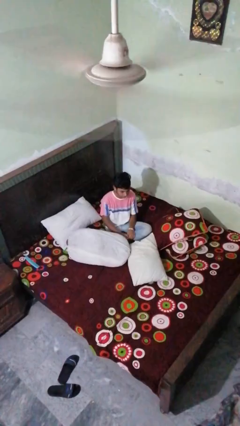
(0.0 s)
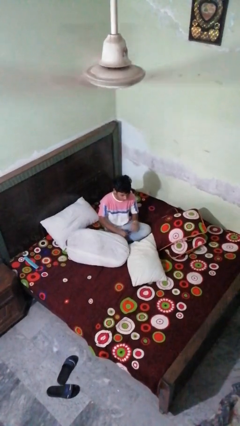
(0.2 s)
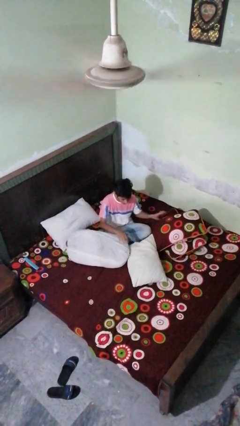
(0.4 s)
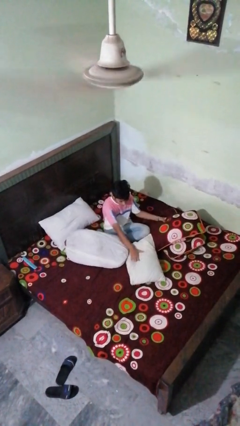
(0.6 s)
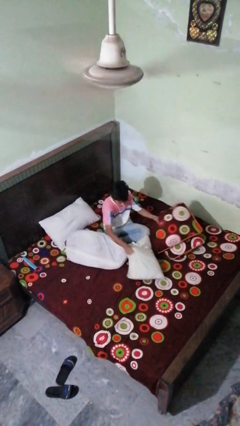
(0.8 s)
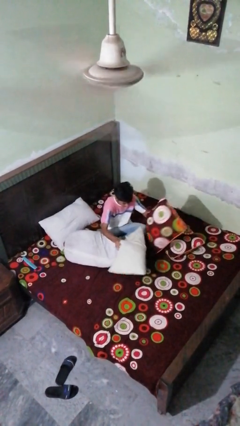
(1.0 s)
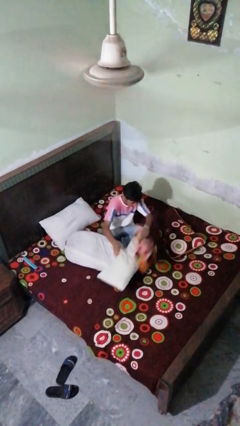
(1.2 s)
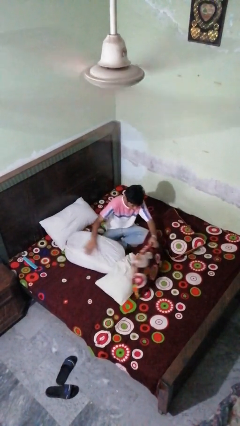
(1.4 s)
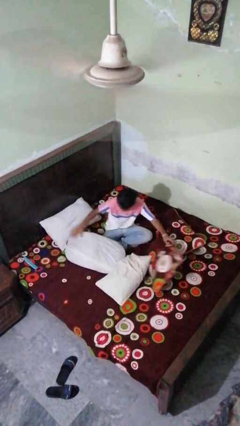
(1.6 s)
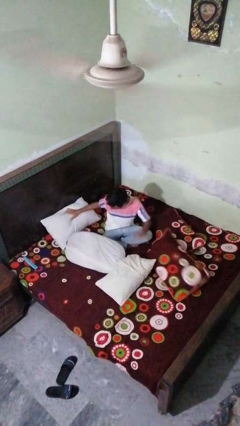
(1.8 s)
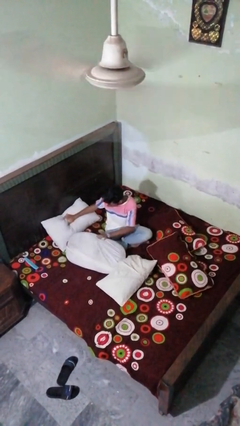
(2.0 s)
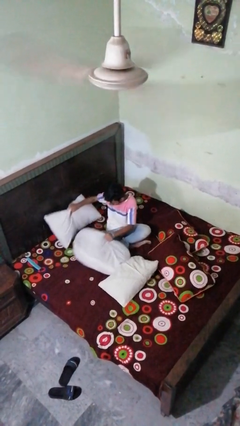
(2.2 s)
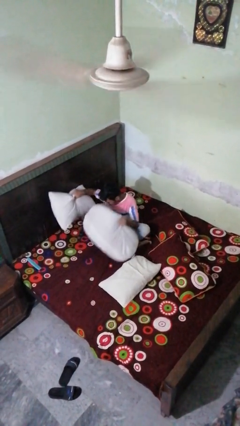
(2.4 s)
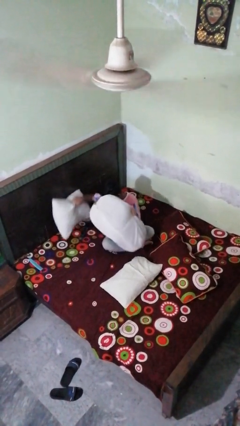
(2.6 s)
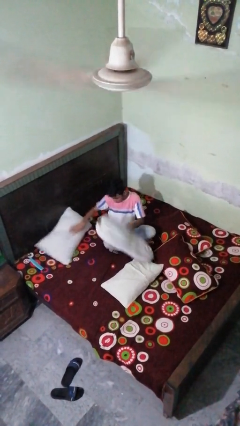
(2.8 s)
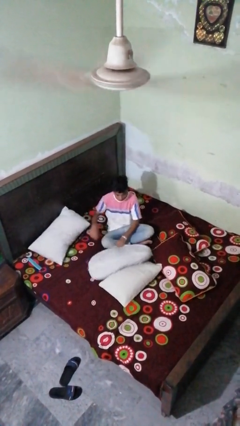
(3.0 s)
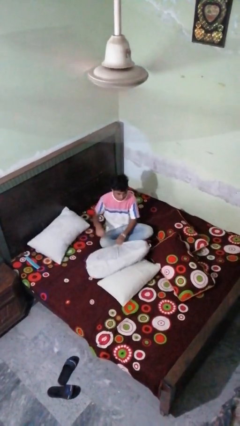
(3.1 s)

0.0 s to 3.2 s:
person searches under bed

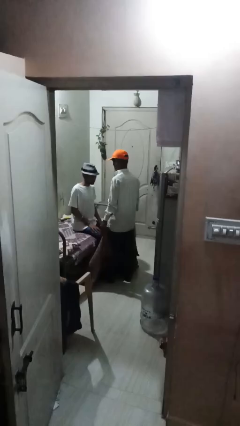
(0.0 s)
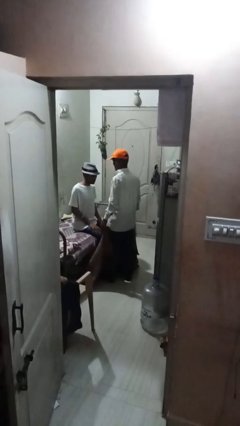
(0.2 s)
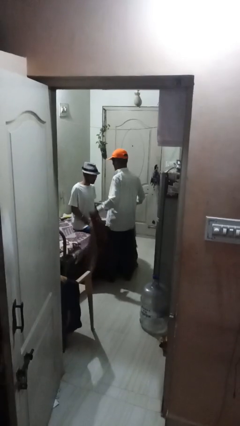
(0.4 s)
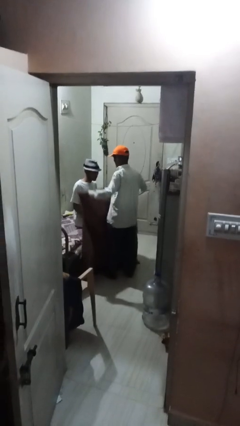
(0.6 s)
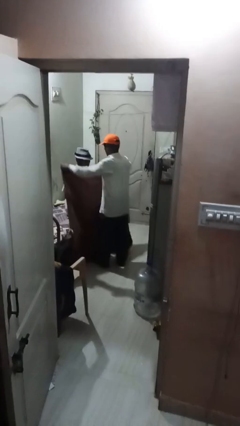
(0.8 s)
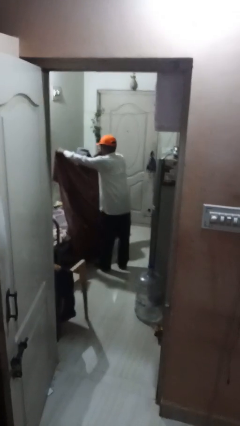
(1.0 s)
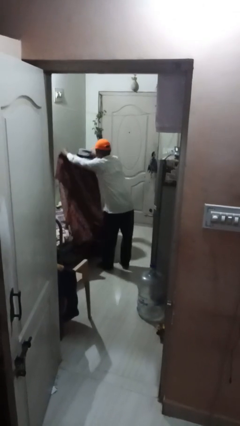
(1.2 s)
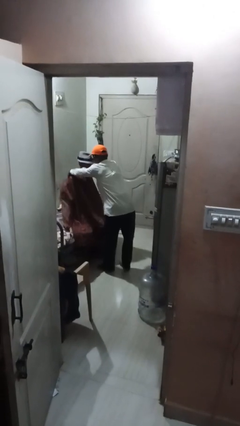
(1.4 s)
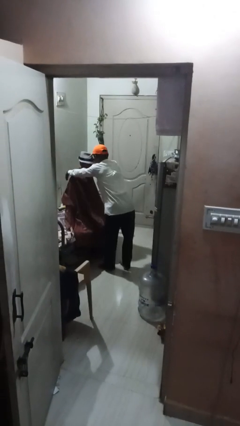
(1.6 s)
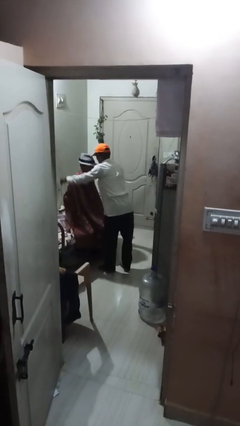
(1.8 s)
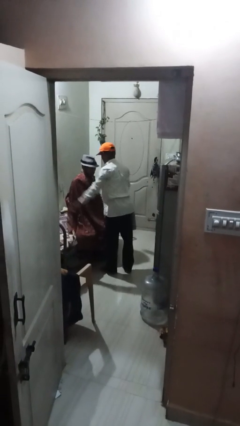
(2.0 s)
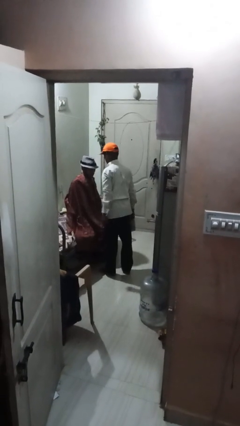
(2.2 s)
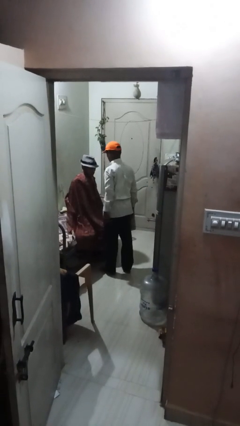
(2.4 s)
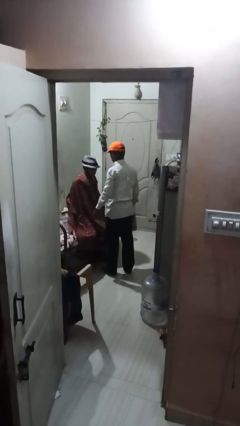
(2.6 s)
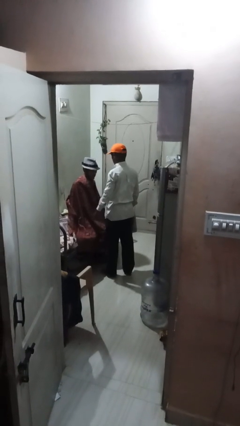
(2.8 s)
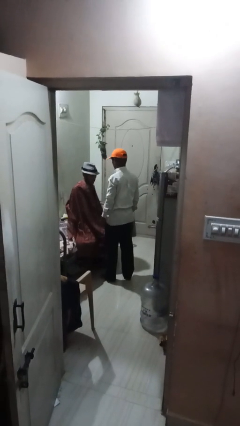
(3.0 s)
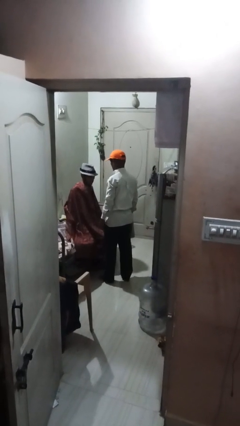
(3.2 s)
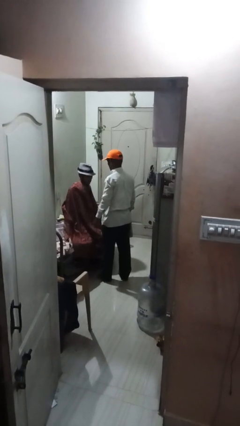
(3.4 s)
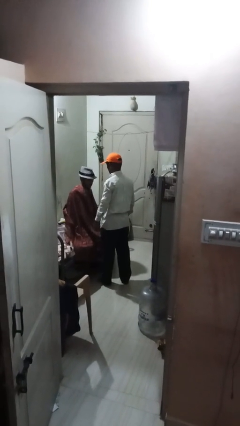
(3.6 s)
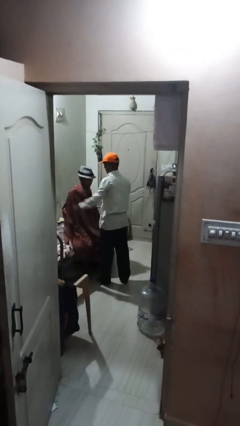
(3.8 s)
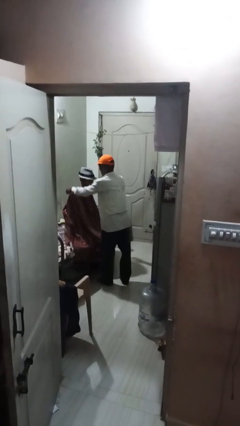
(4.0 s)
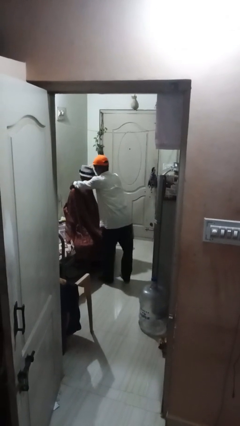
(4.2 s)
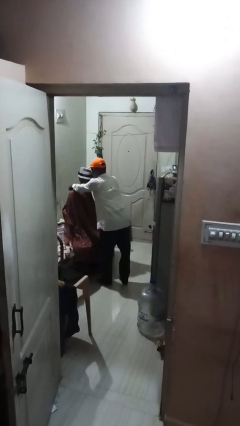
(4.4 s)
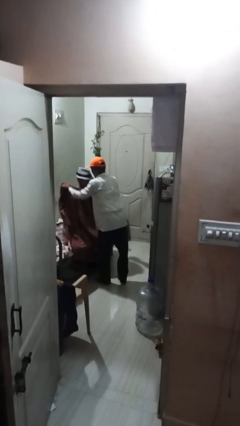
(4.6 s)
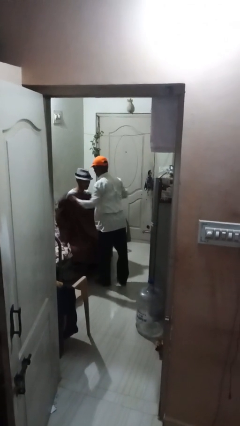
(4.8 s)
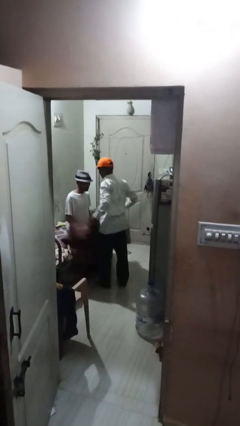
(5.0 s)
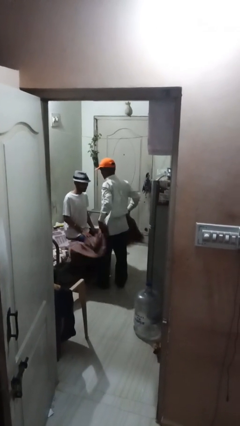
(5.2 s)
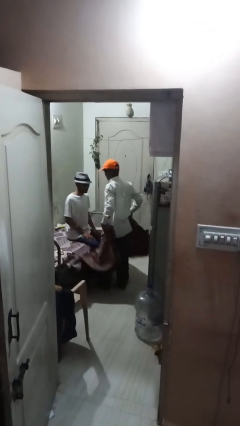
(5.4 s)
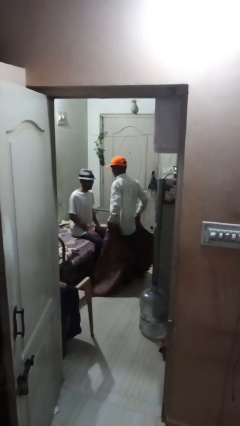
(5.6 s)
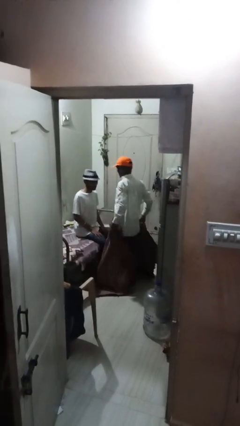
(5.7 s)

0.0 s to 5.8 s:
person covers friend with blanket

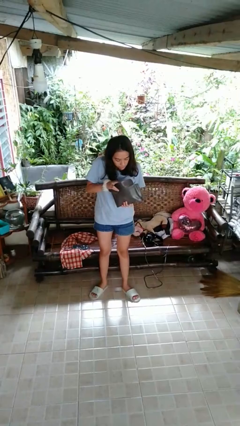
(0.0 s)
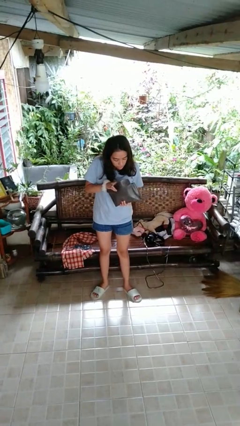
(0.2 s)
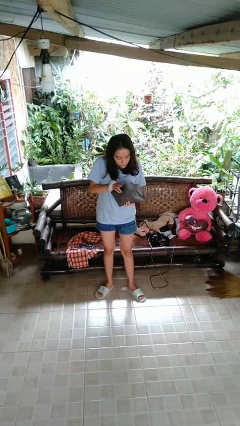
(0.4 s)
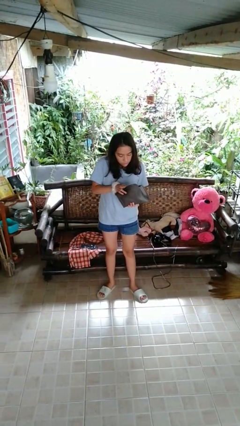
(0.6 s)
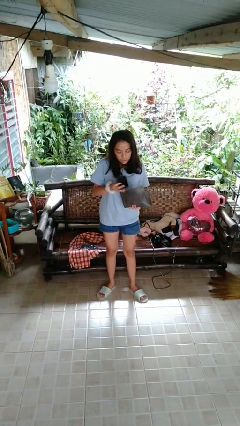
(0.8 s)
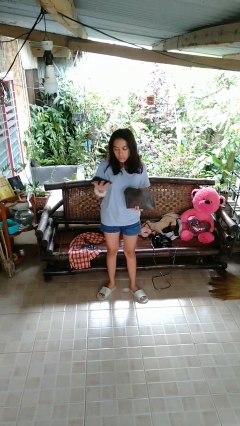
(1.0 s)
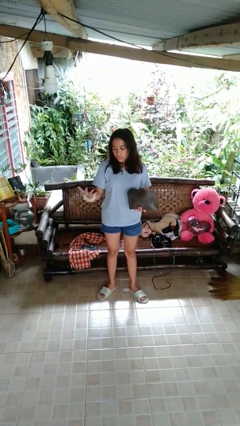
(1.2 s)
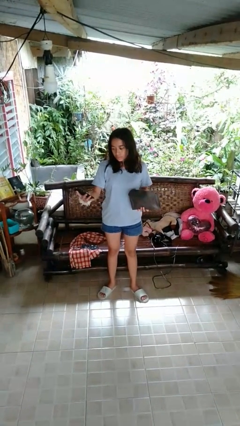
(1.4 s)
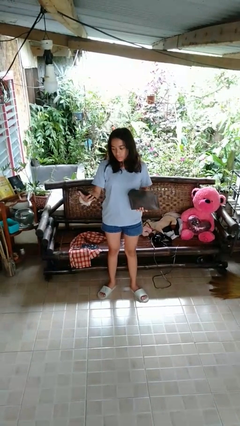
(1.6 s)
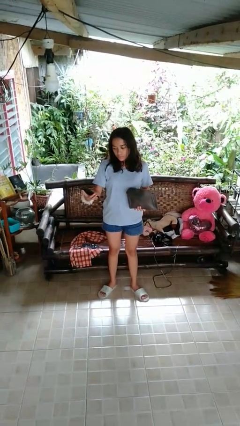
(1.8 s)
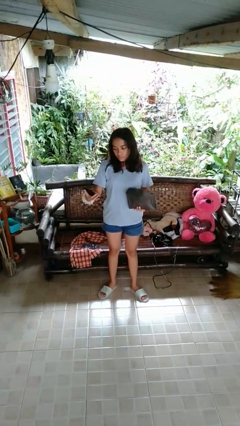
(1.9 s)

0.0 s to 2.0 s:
person takes object from purse

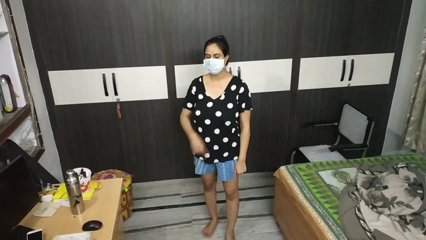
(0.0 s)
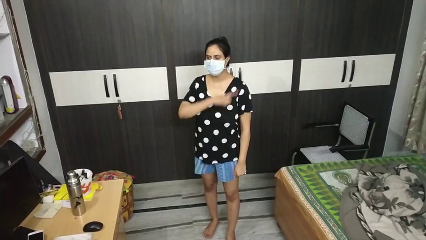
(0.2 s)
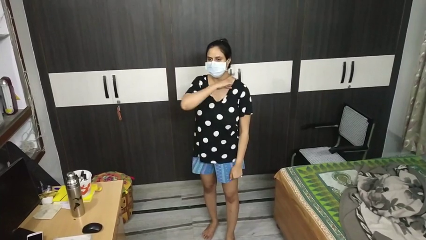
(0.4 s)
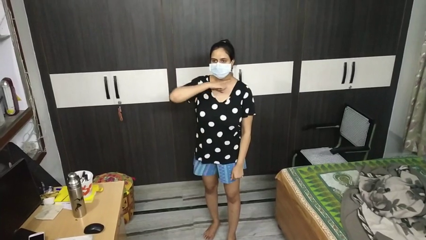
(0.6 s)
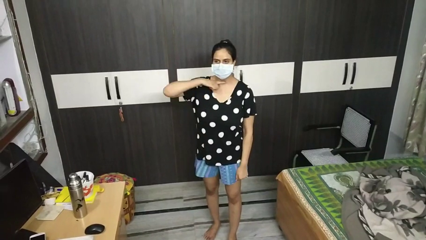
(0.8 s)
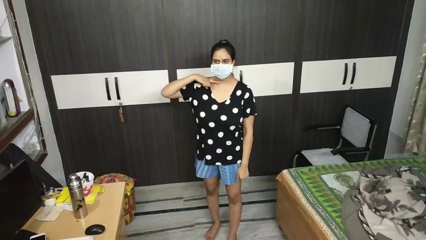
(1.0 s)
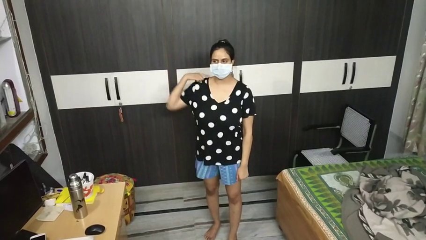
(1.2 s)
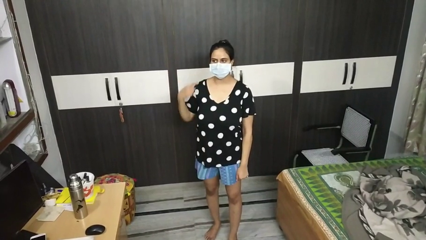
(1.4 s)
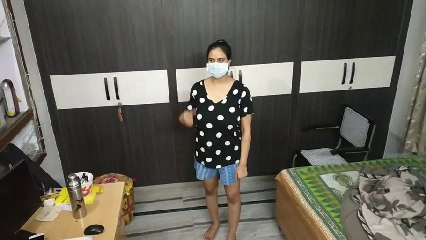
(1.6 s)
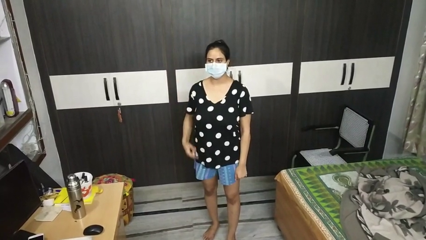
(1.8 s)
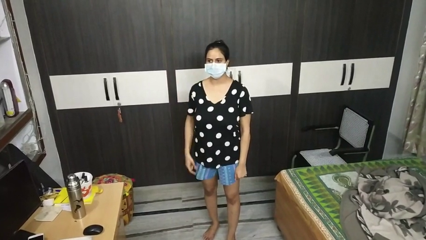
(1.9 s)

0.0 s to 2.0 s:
person gestures cut

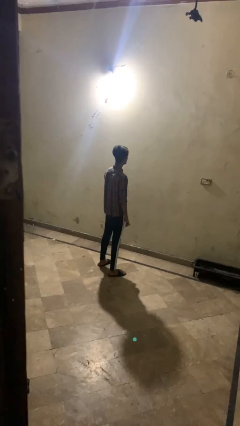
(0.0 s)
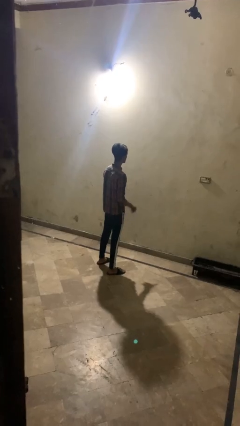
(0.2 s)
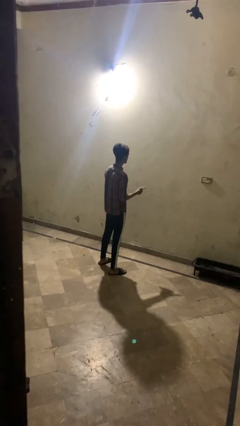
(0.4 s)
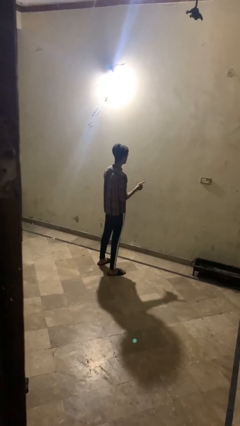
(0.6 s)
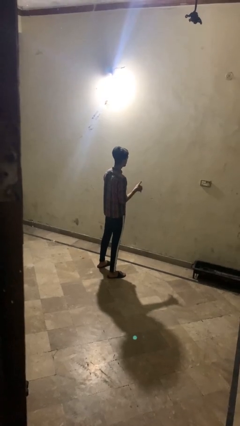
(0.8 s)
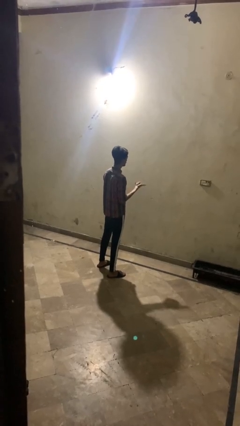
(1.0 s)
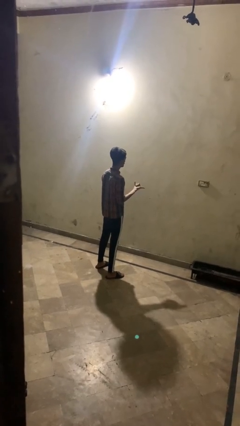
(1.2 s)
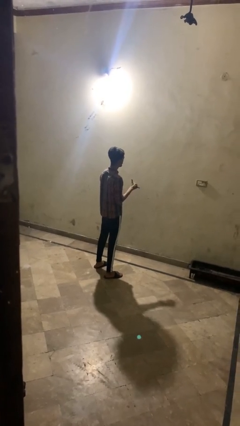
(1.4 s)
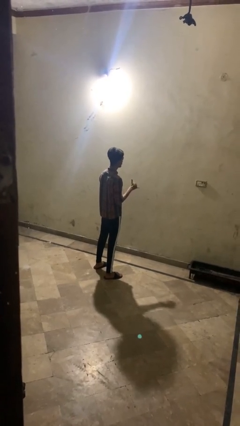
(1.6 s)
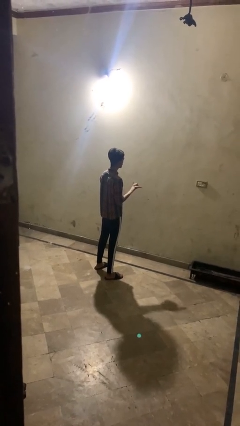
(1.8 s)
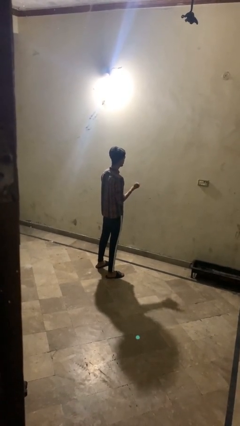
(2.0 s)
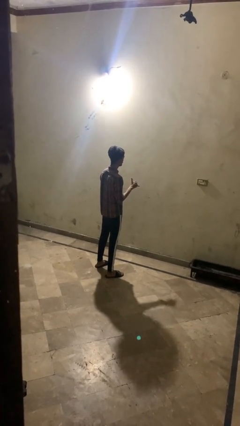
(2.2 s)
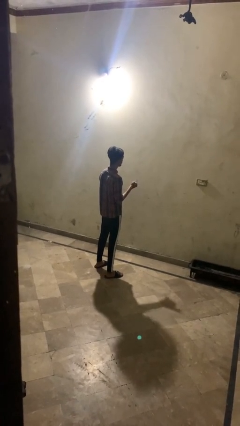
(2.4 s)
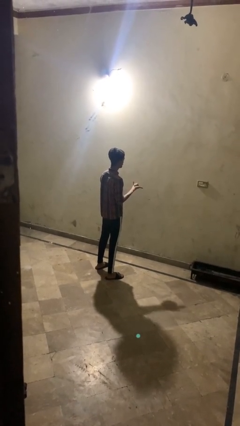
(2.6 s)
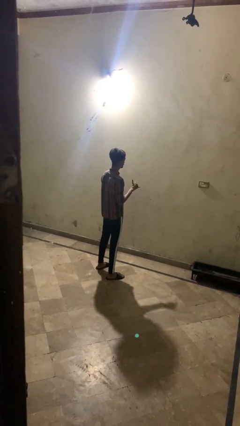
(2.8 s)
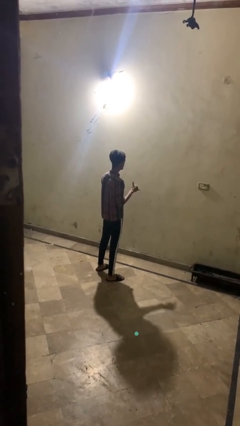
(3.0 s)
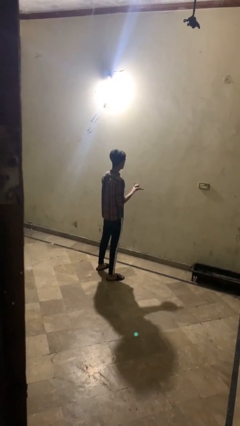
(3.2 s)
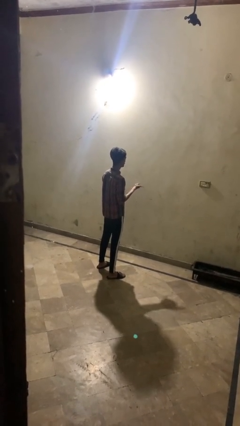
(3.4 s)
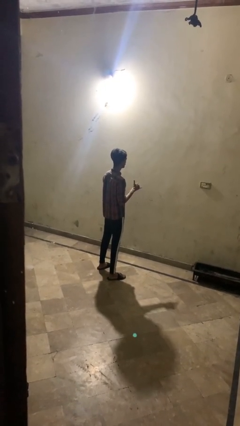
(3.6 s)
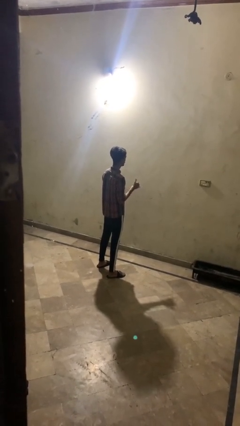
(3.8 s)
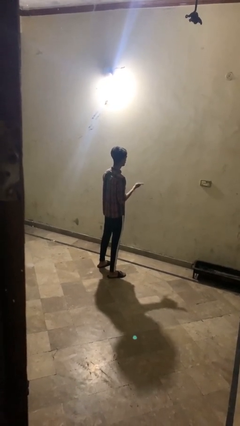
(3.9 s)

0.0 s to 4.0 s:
person gestures hang loose

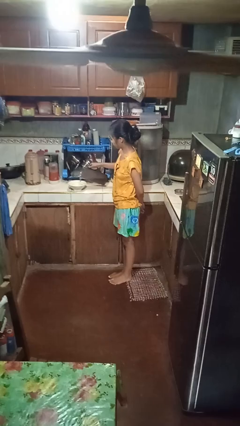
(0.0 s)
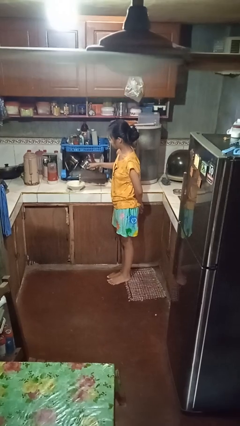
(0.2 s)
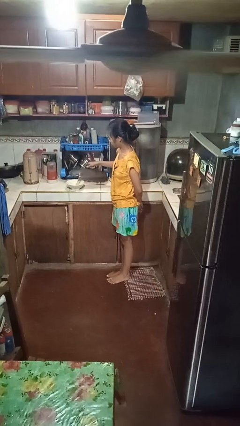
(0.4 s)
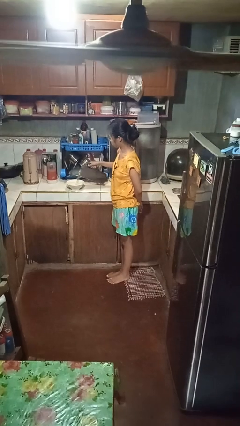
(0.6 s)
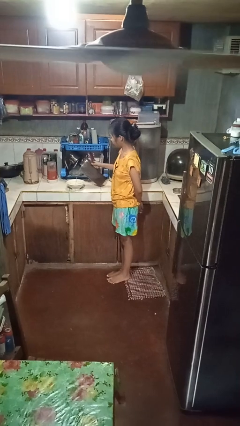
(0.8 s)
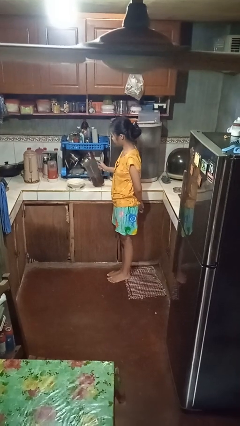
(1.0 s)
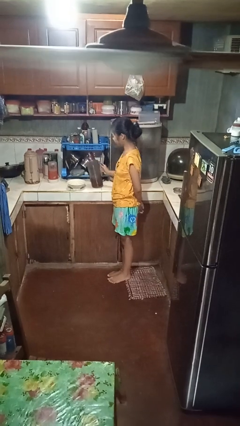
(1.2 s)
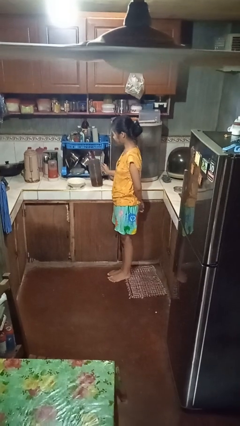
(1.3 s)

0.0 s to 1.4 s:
person pours into bowl
